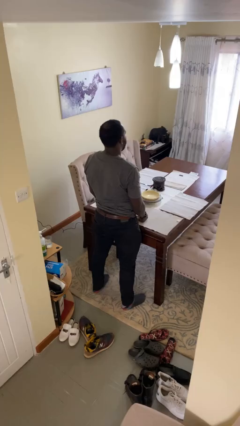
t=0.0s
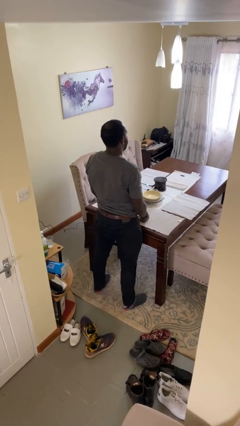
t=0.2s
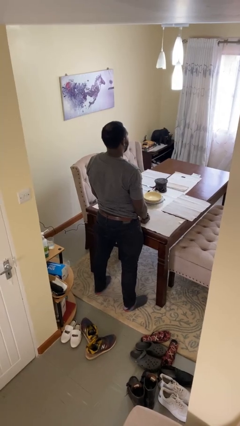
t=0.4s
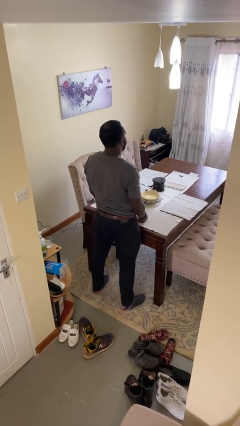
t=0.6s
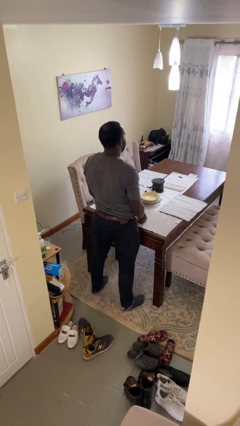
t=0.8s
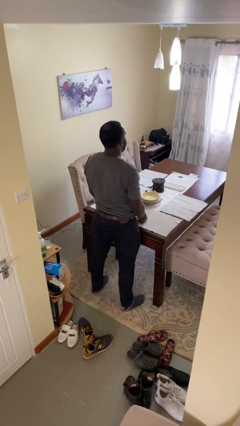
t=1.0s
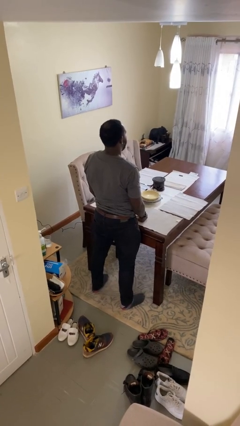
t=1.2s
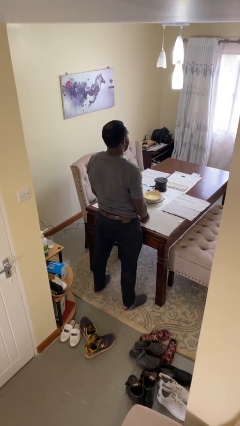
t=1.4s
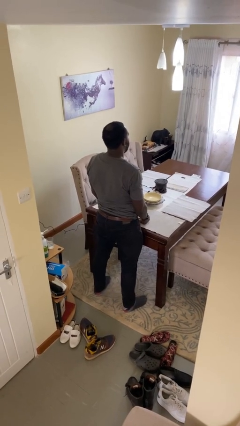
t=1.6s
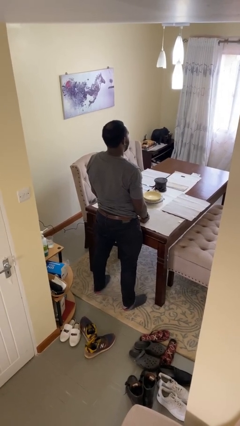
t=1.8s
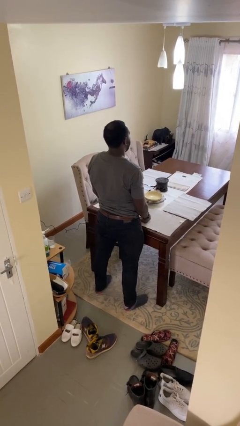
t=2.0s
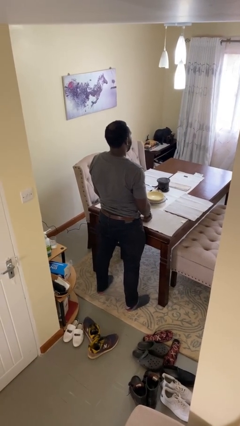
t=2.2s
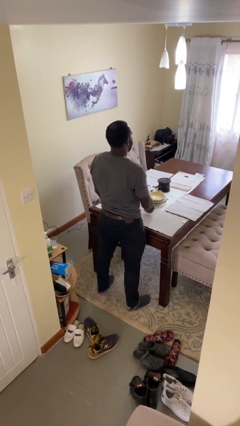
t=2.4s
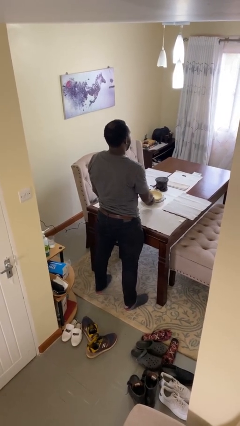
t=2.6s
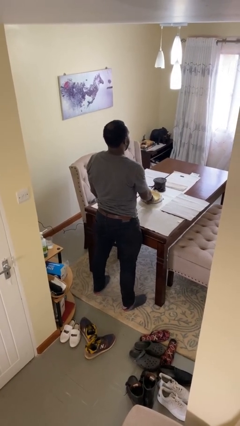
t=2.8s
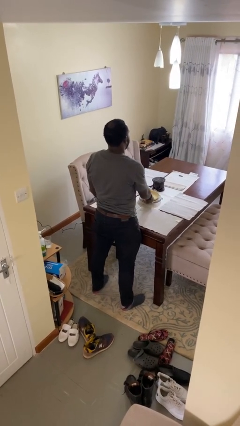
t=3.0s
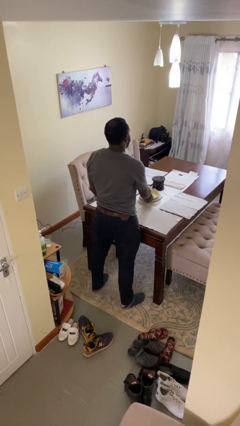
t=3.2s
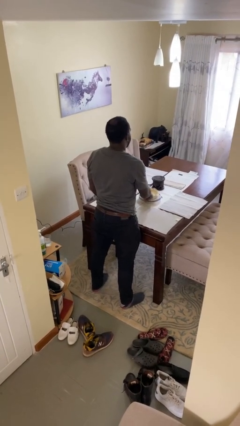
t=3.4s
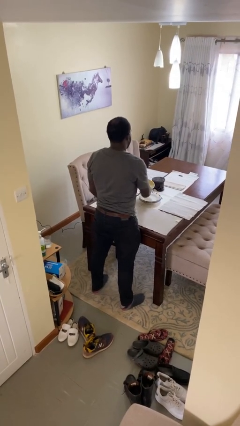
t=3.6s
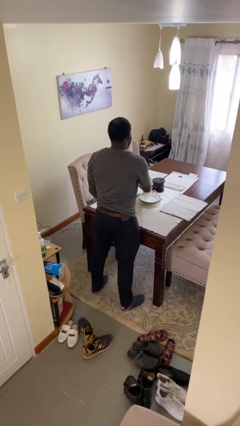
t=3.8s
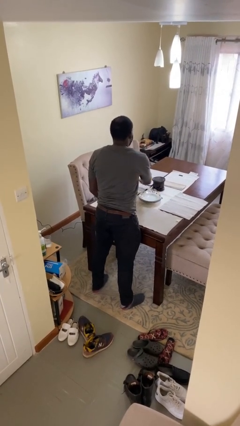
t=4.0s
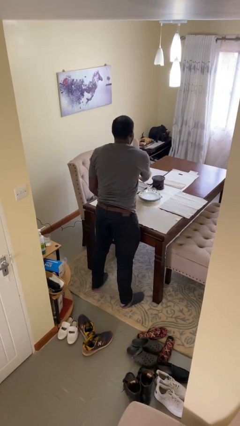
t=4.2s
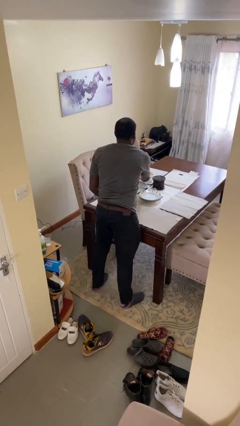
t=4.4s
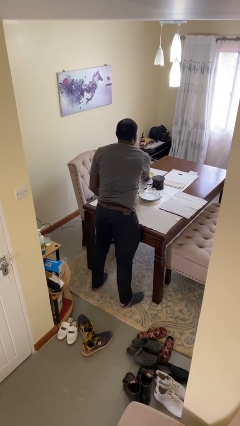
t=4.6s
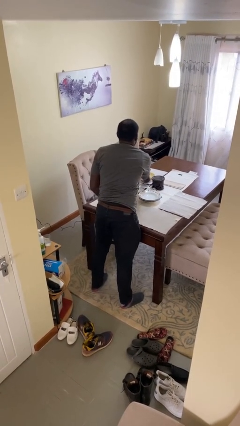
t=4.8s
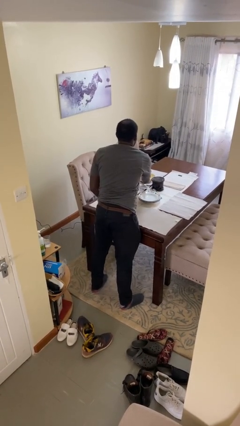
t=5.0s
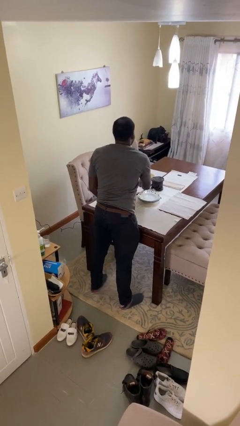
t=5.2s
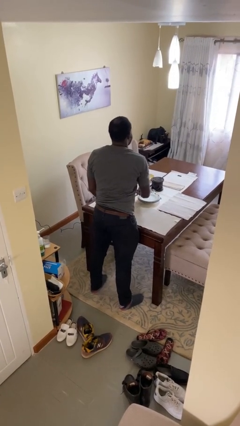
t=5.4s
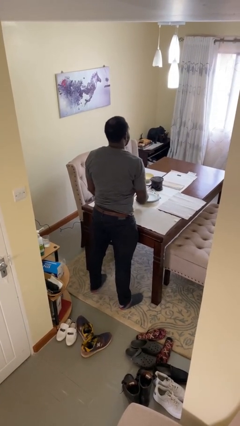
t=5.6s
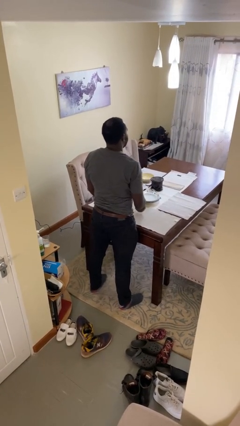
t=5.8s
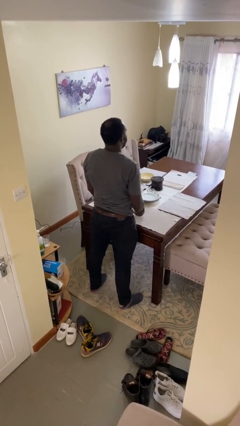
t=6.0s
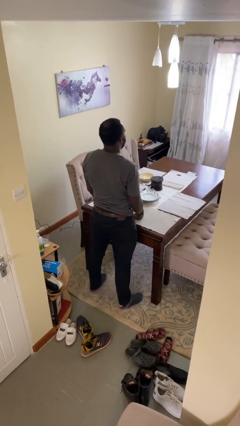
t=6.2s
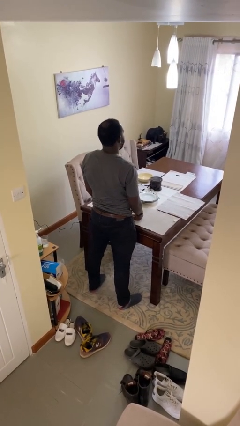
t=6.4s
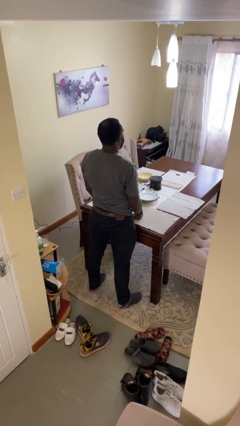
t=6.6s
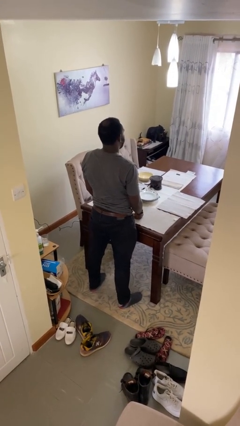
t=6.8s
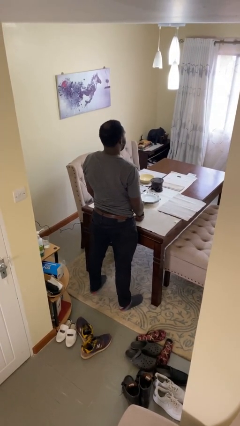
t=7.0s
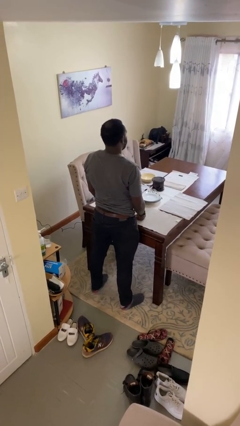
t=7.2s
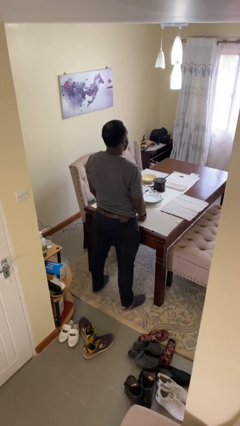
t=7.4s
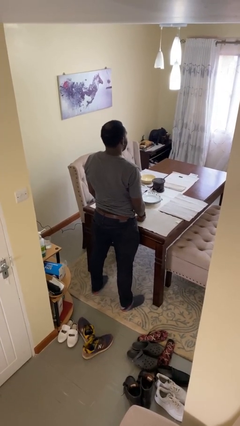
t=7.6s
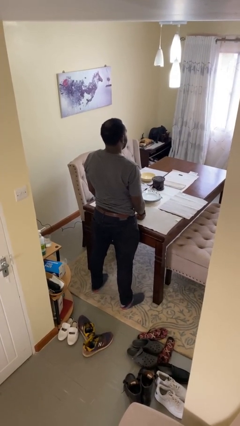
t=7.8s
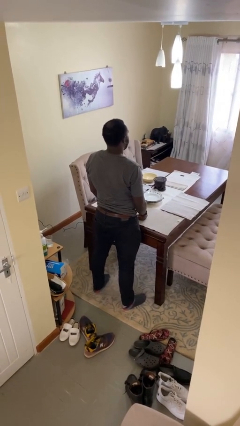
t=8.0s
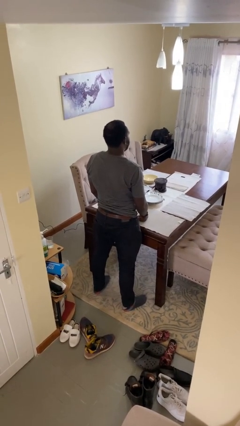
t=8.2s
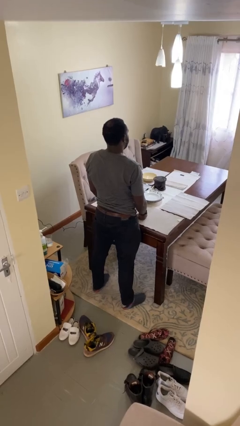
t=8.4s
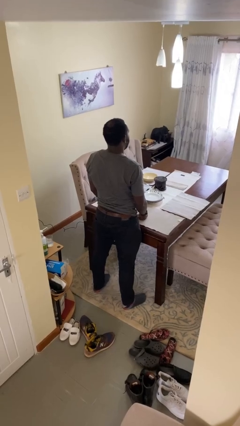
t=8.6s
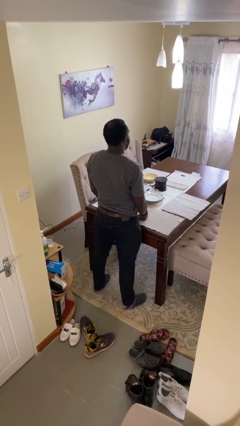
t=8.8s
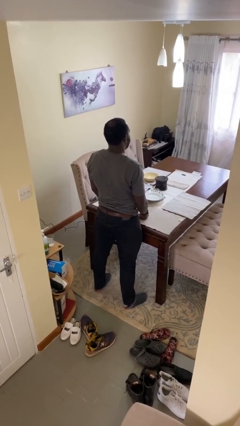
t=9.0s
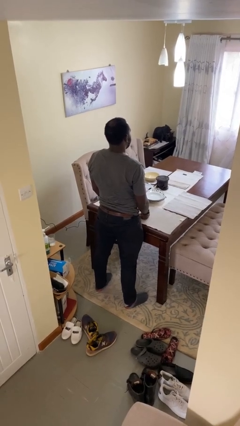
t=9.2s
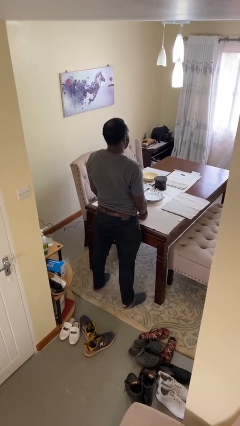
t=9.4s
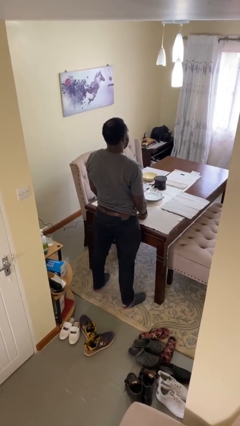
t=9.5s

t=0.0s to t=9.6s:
person sets table

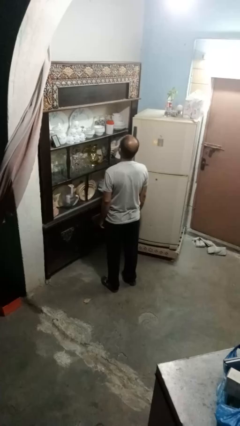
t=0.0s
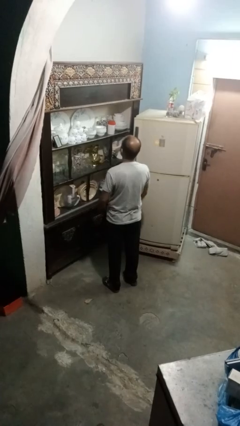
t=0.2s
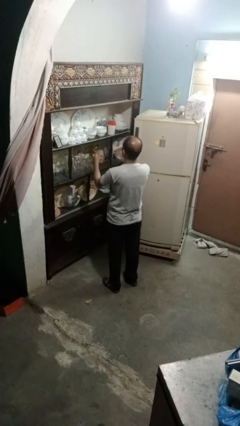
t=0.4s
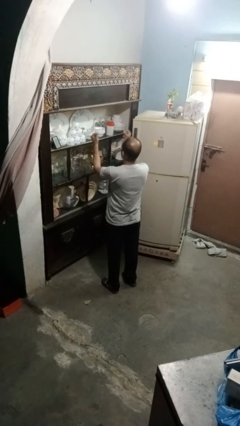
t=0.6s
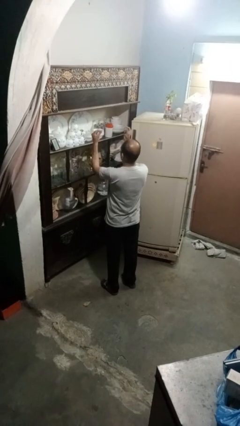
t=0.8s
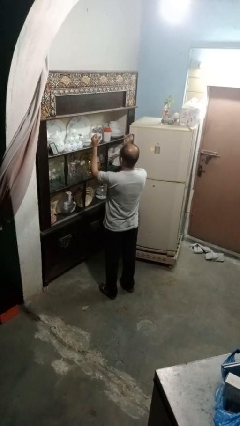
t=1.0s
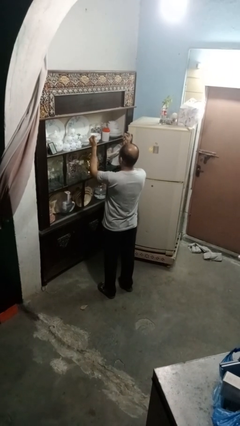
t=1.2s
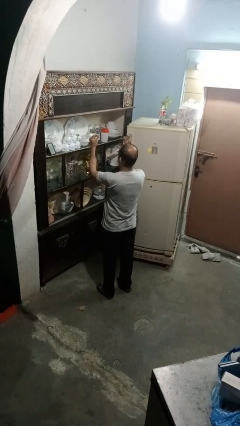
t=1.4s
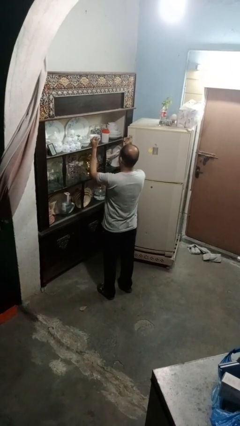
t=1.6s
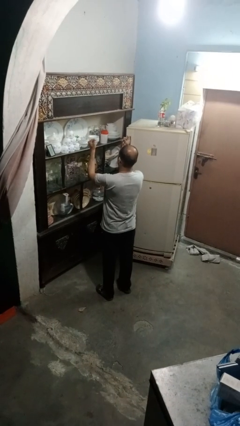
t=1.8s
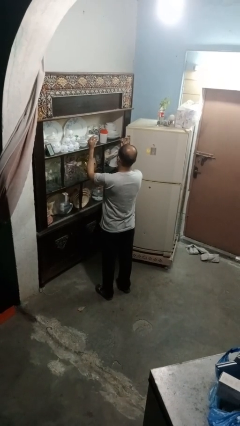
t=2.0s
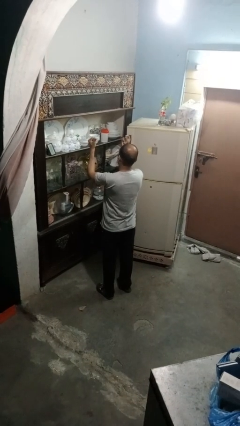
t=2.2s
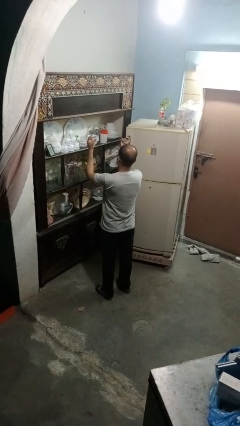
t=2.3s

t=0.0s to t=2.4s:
person snaps fingers

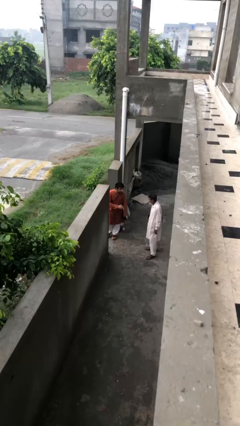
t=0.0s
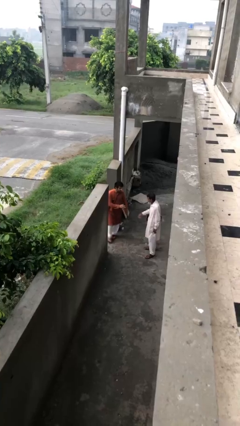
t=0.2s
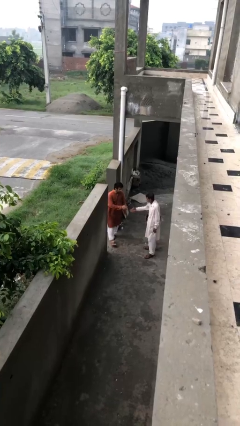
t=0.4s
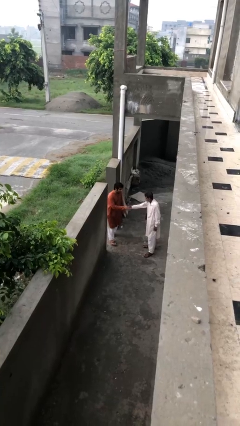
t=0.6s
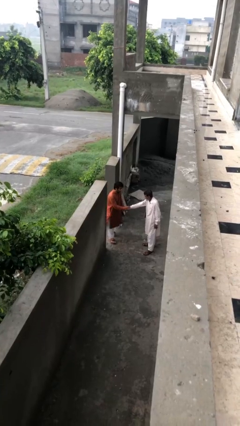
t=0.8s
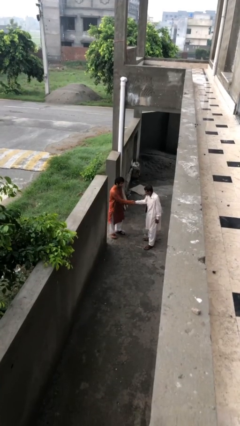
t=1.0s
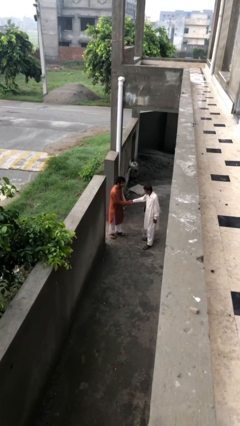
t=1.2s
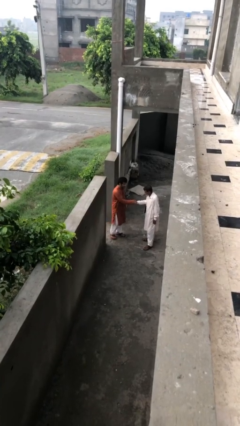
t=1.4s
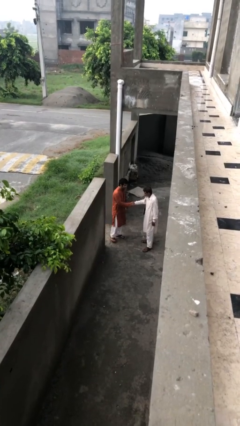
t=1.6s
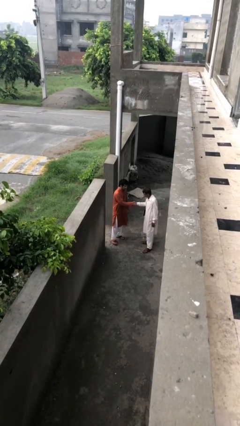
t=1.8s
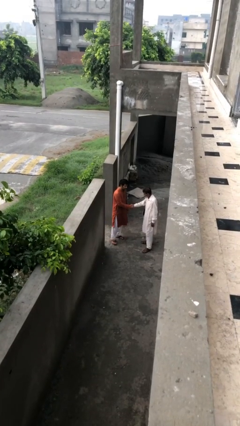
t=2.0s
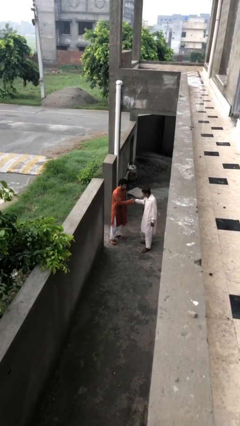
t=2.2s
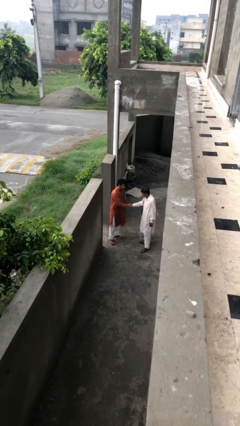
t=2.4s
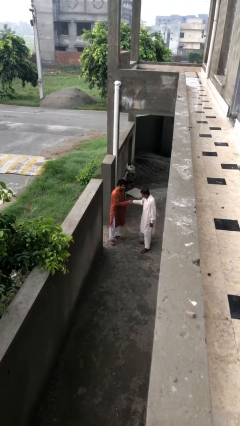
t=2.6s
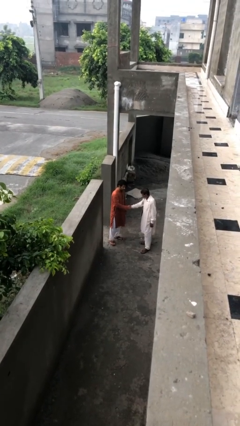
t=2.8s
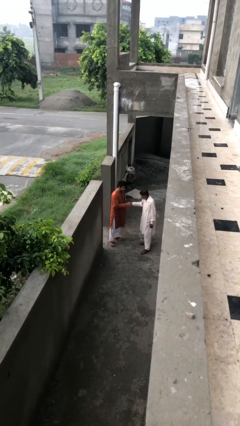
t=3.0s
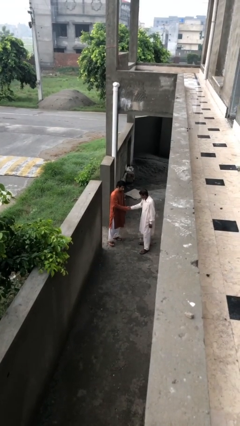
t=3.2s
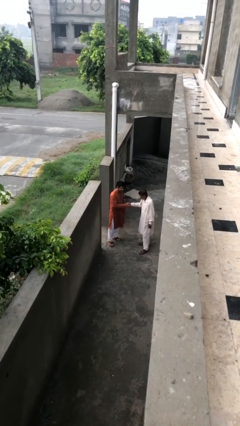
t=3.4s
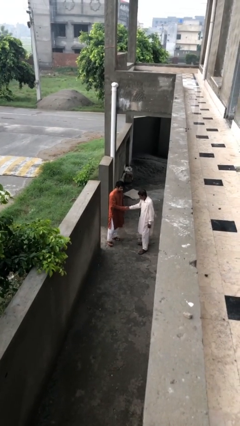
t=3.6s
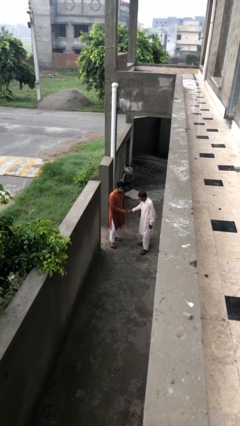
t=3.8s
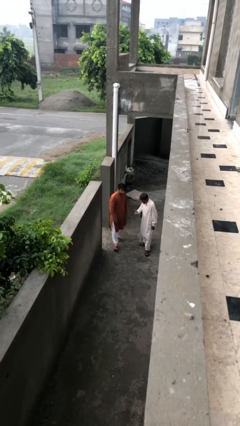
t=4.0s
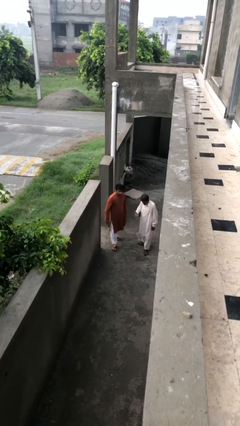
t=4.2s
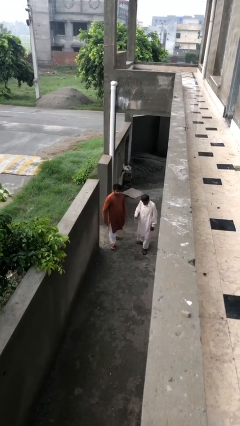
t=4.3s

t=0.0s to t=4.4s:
person shakes hand

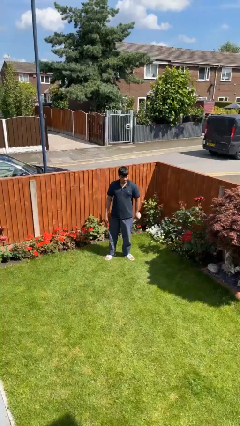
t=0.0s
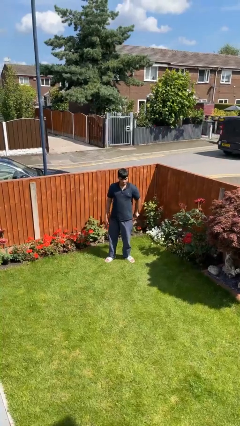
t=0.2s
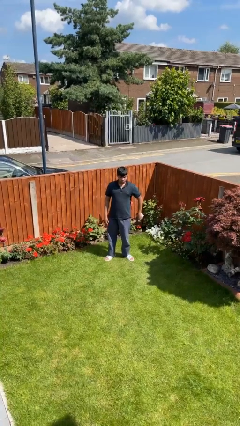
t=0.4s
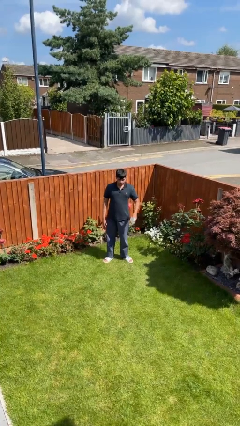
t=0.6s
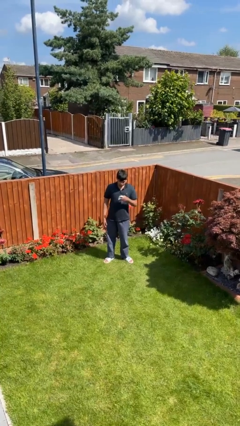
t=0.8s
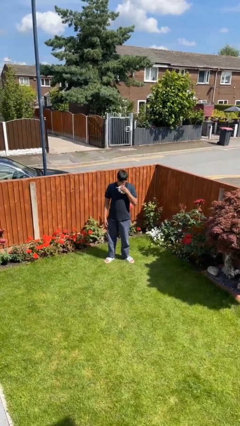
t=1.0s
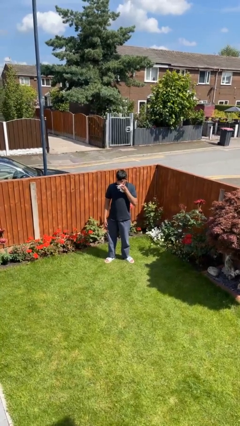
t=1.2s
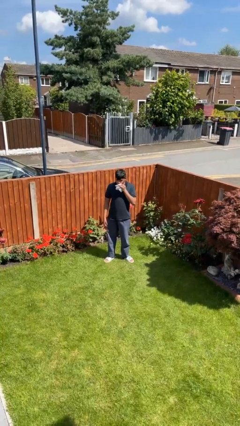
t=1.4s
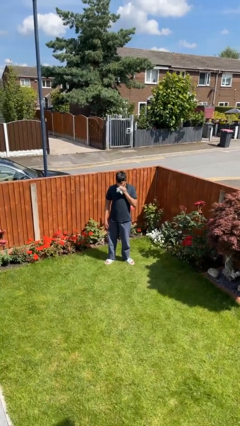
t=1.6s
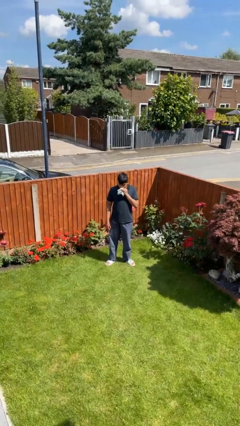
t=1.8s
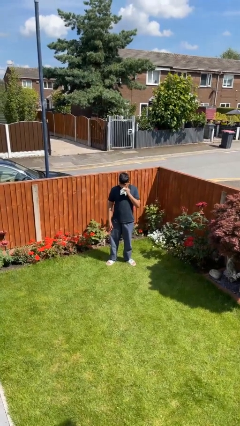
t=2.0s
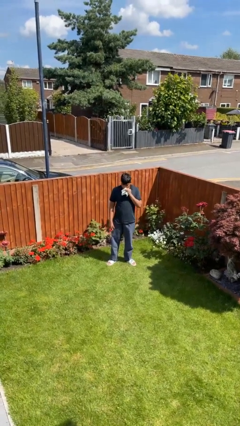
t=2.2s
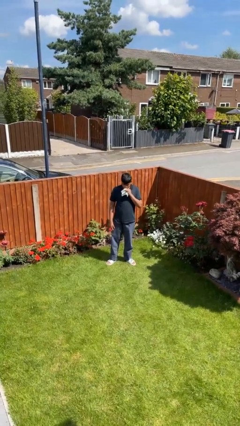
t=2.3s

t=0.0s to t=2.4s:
person wipes mouth with napkin
